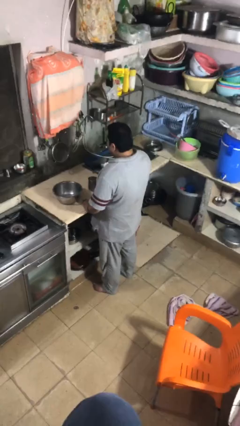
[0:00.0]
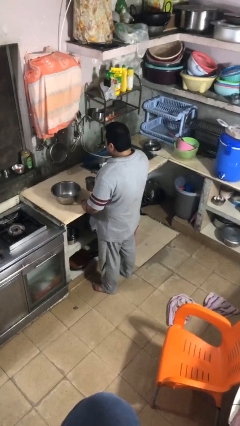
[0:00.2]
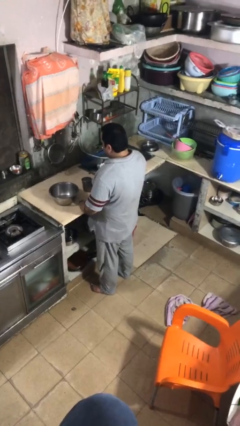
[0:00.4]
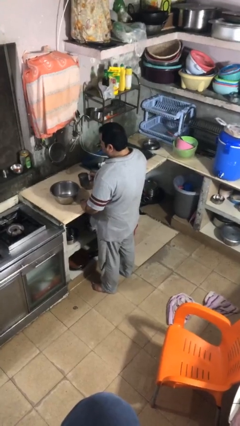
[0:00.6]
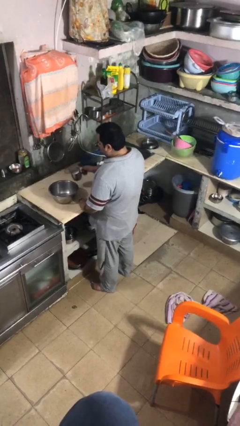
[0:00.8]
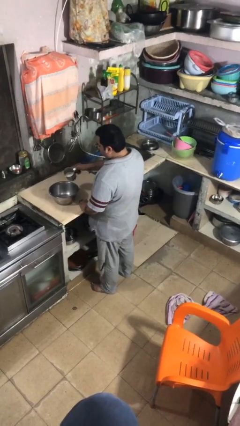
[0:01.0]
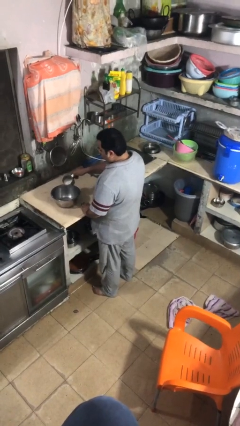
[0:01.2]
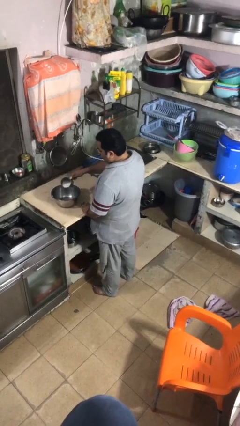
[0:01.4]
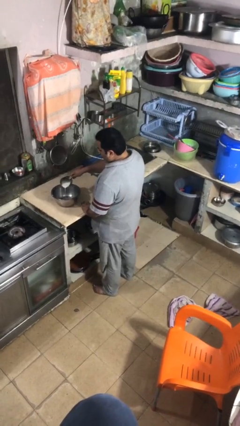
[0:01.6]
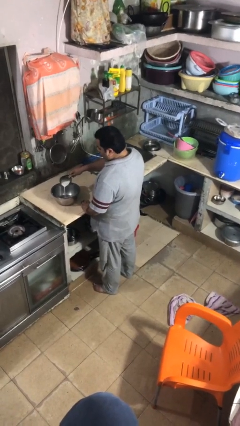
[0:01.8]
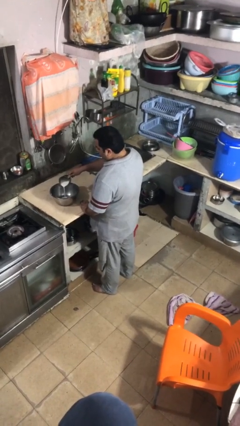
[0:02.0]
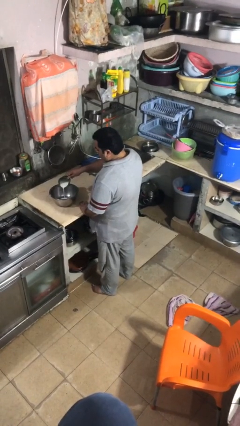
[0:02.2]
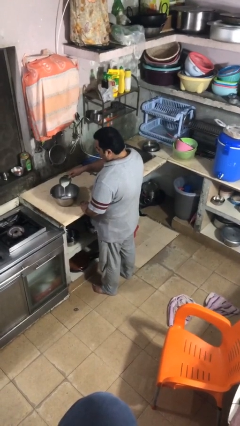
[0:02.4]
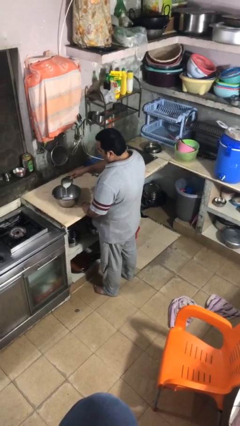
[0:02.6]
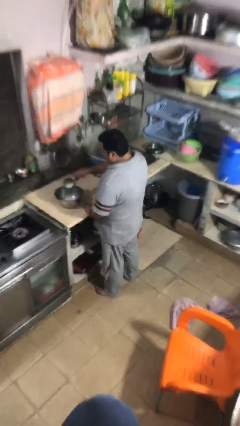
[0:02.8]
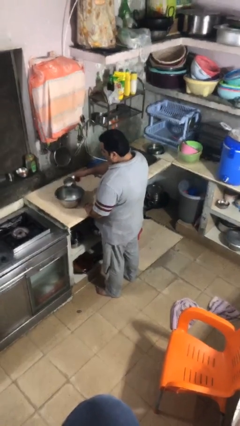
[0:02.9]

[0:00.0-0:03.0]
person pours into bowl

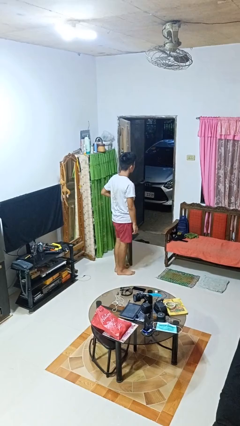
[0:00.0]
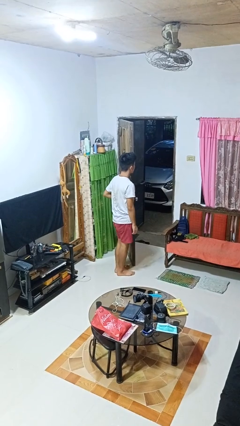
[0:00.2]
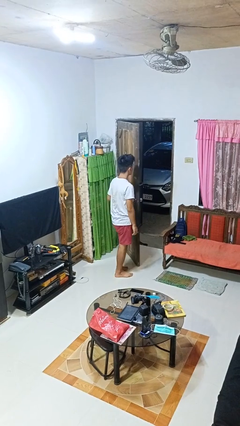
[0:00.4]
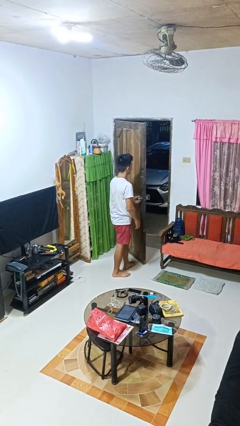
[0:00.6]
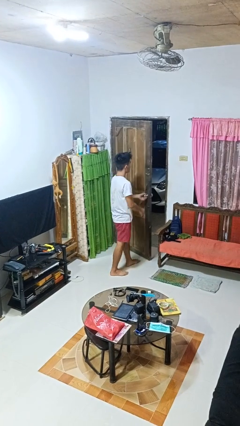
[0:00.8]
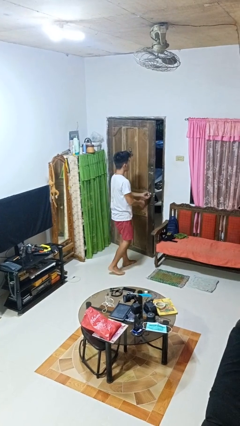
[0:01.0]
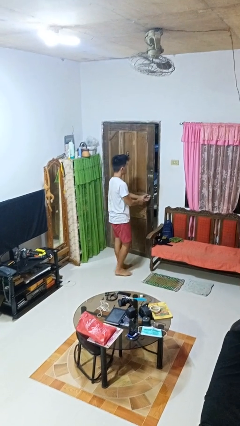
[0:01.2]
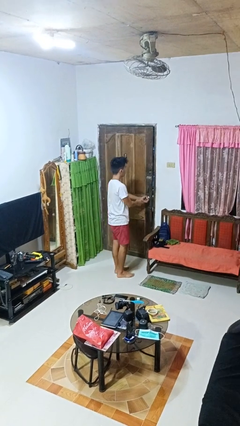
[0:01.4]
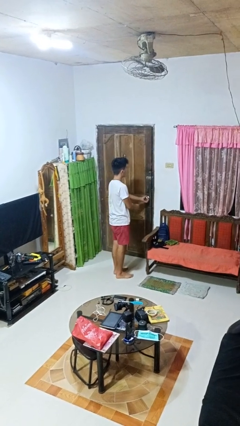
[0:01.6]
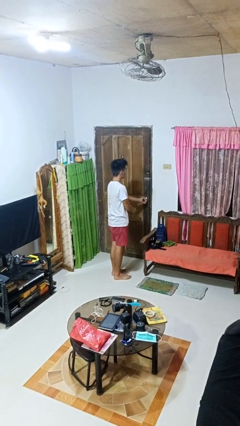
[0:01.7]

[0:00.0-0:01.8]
person closes facility door

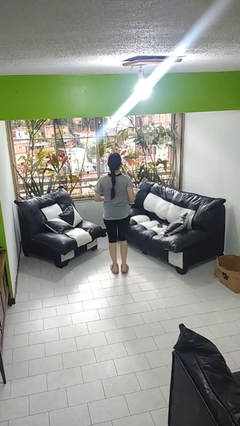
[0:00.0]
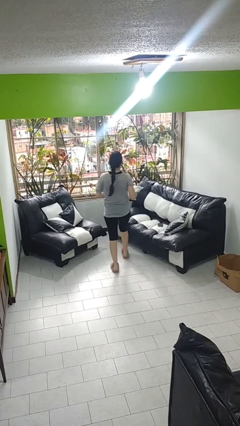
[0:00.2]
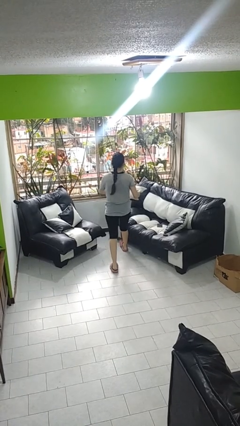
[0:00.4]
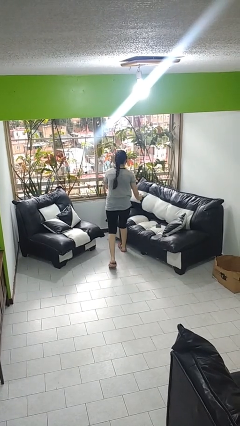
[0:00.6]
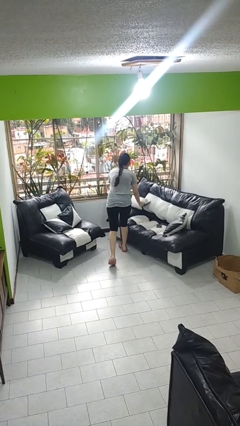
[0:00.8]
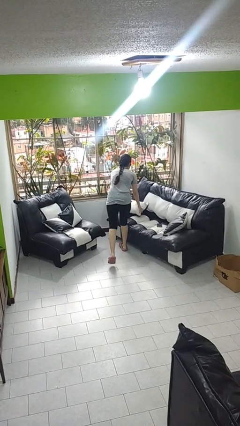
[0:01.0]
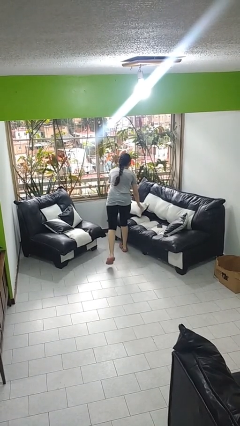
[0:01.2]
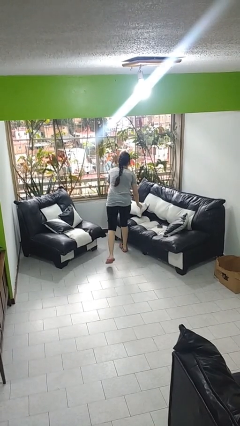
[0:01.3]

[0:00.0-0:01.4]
person puts down object on couch

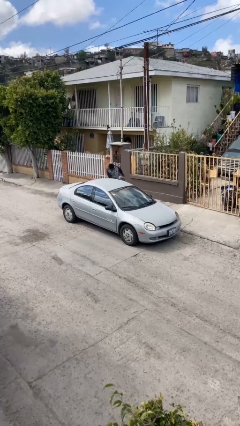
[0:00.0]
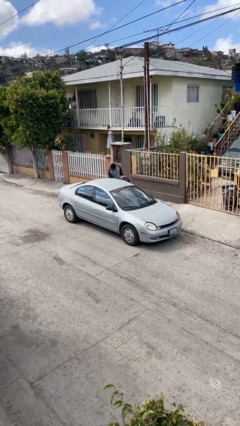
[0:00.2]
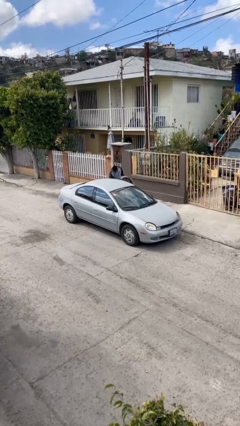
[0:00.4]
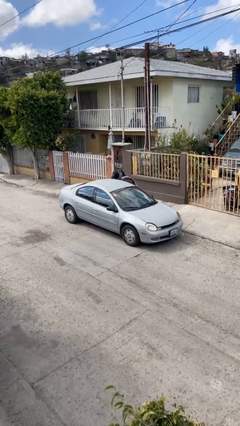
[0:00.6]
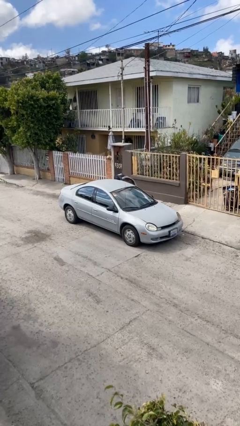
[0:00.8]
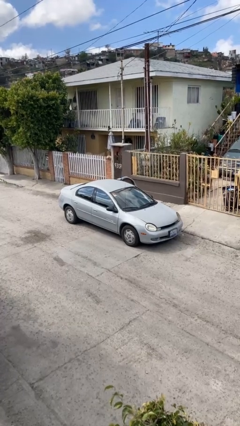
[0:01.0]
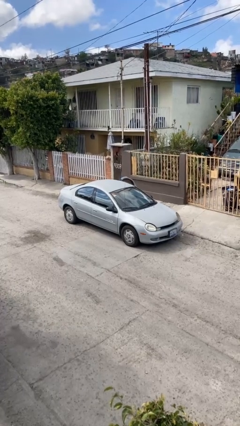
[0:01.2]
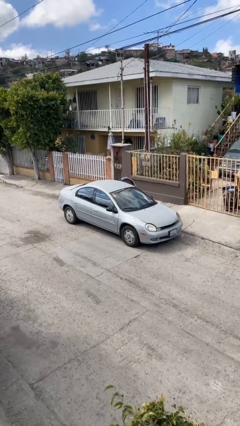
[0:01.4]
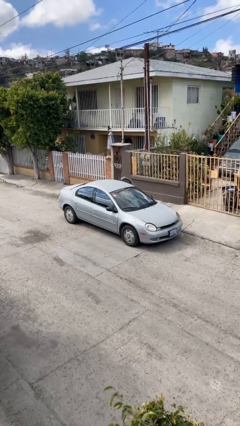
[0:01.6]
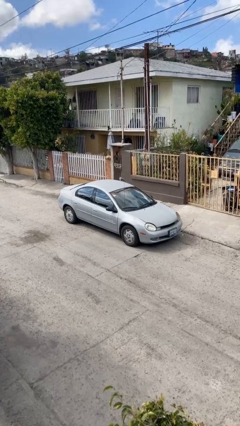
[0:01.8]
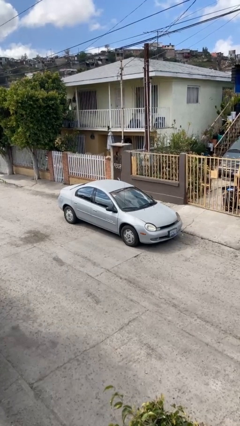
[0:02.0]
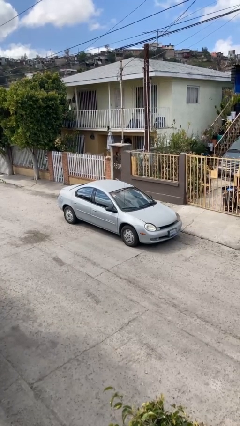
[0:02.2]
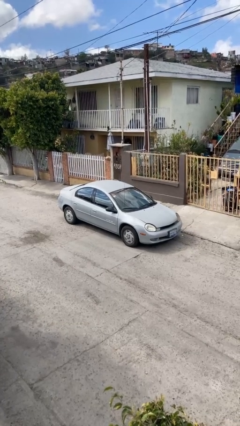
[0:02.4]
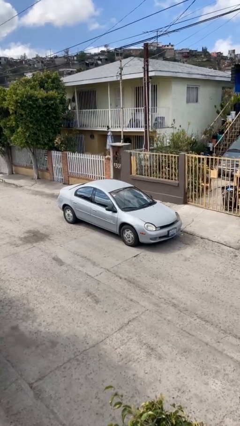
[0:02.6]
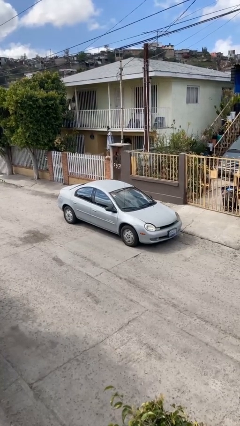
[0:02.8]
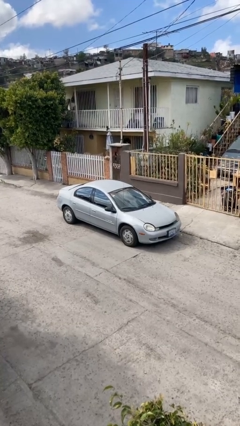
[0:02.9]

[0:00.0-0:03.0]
car picks up person

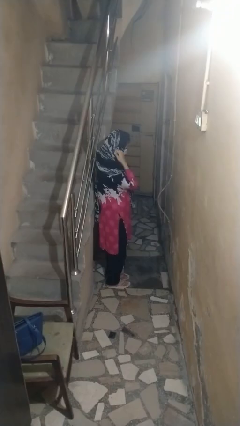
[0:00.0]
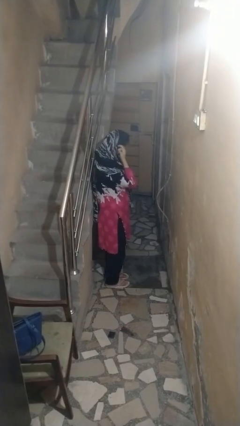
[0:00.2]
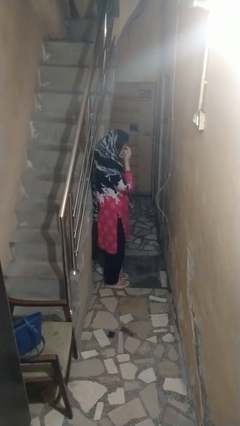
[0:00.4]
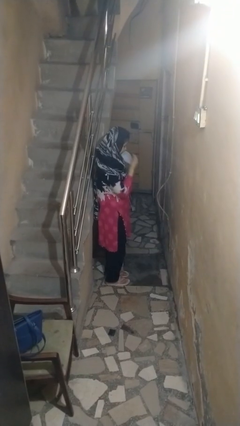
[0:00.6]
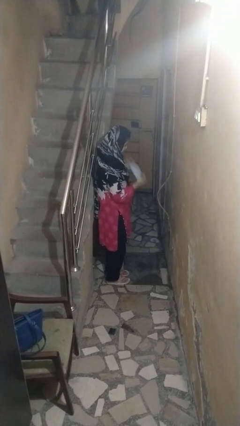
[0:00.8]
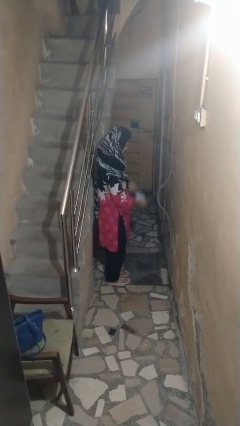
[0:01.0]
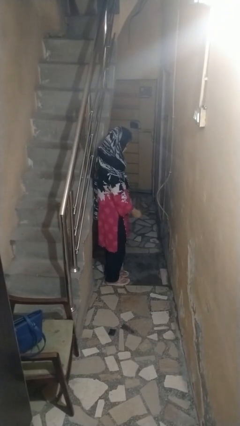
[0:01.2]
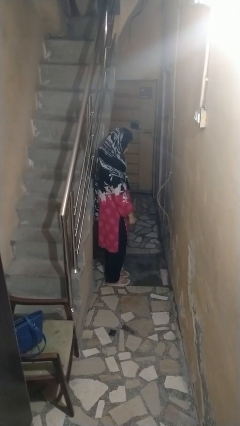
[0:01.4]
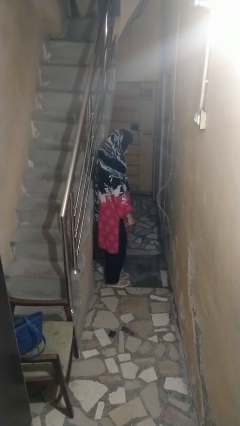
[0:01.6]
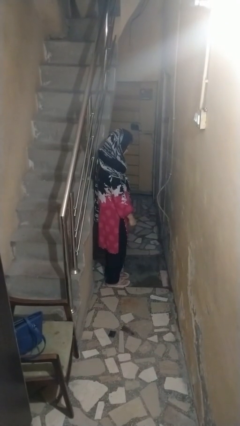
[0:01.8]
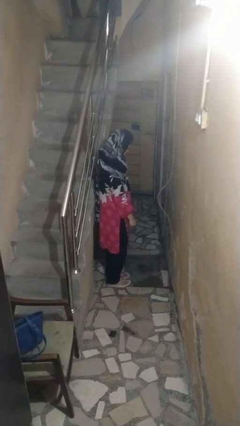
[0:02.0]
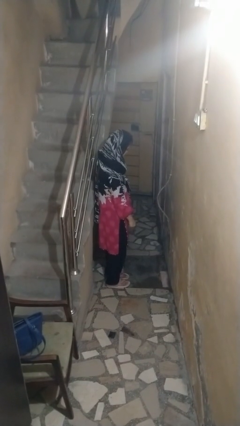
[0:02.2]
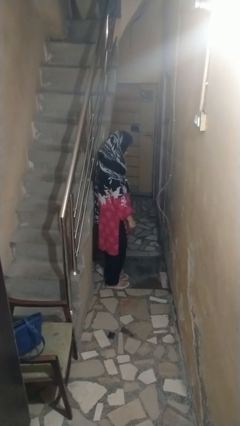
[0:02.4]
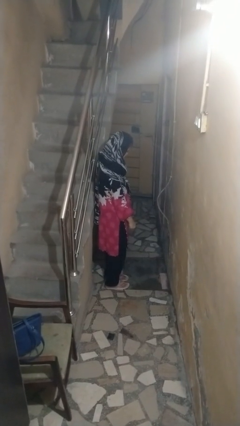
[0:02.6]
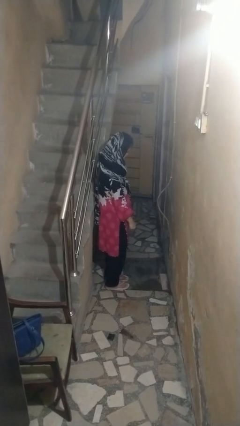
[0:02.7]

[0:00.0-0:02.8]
person takes off facemask

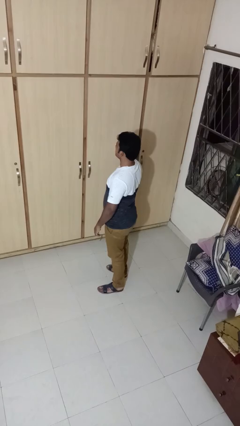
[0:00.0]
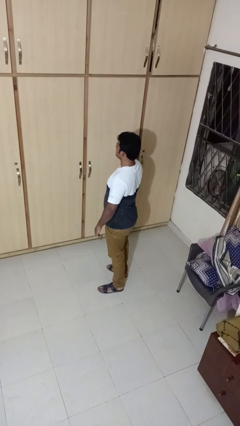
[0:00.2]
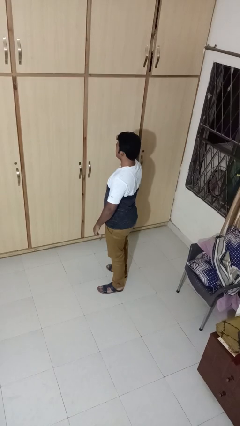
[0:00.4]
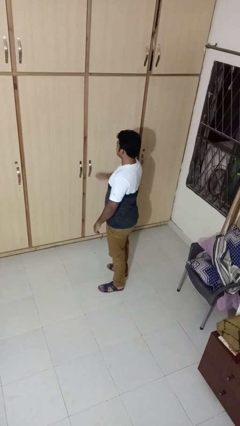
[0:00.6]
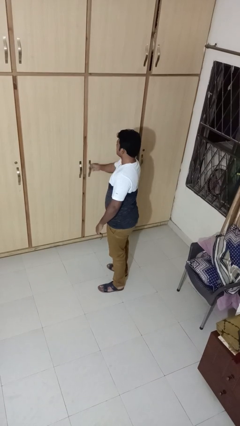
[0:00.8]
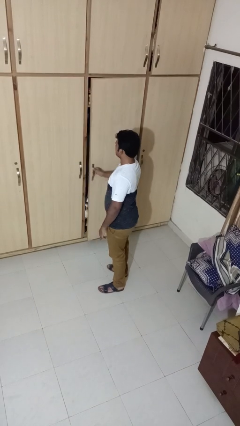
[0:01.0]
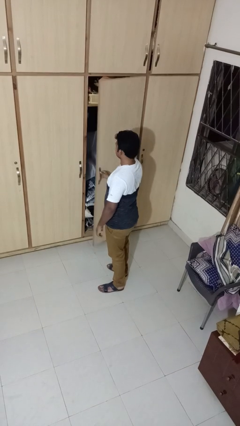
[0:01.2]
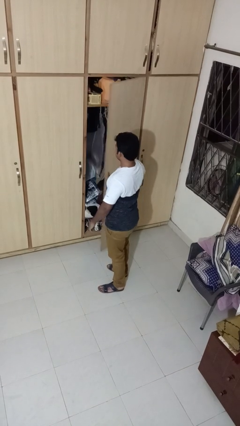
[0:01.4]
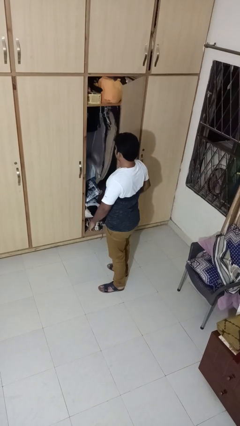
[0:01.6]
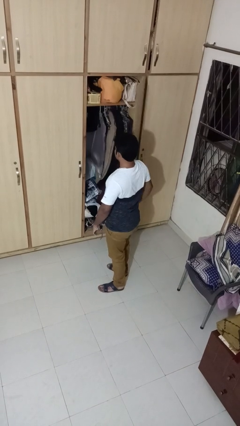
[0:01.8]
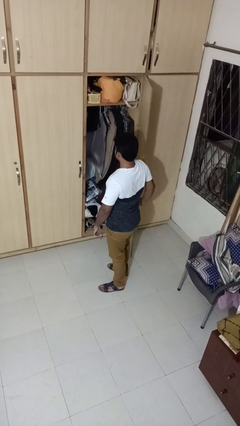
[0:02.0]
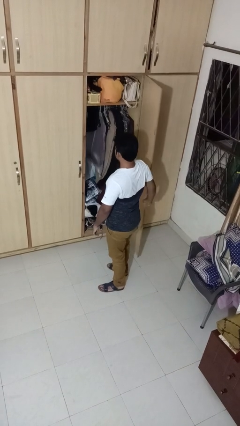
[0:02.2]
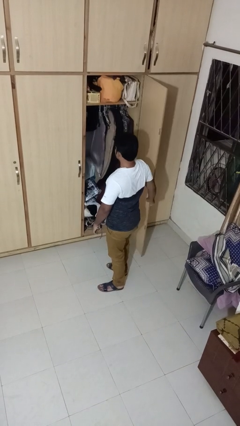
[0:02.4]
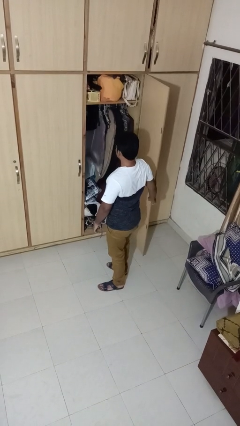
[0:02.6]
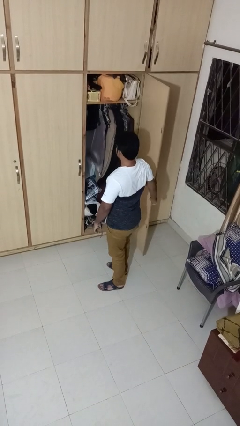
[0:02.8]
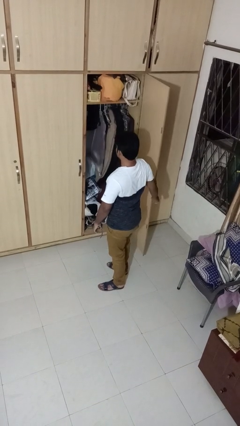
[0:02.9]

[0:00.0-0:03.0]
person opens closet door

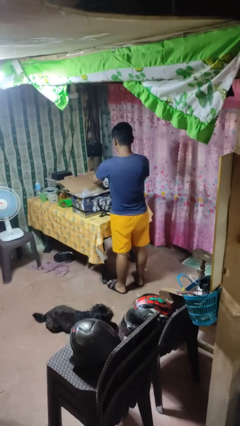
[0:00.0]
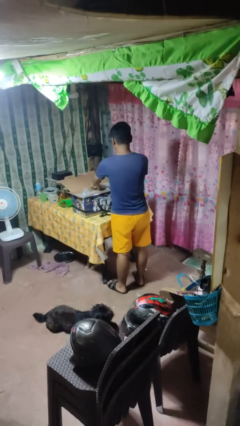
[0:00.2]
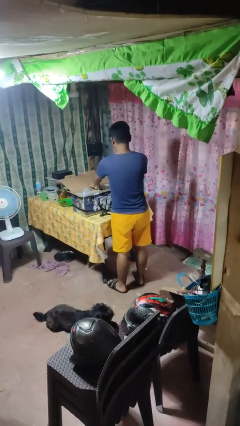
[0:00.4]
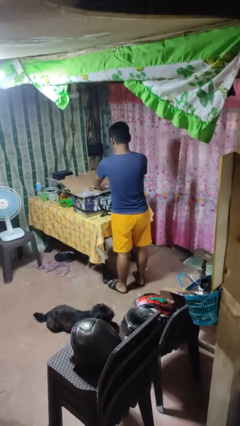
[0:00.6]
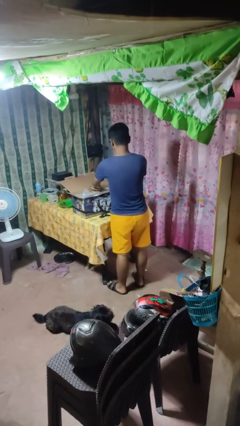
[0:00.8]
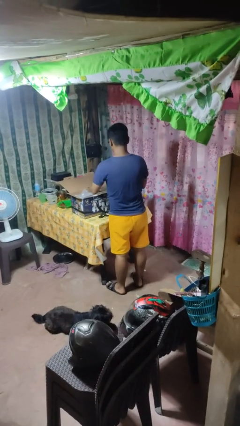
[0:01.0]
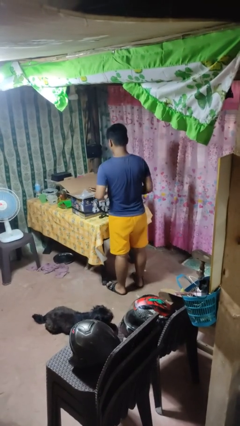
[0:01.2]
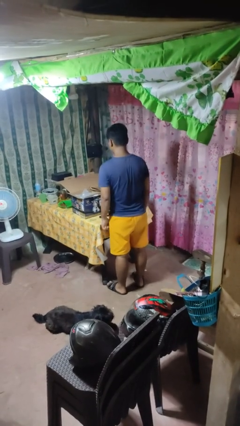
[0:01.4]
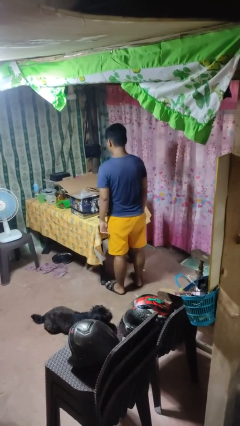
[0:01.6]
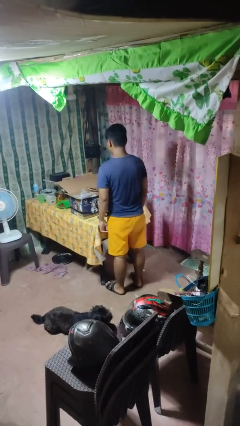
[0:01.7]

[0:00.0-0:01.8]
person puts object into box

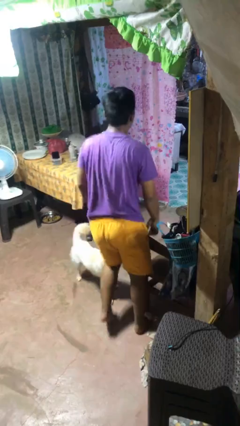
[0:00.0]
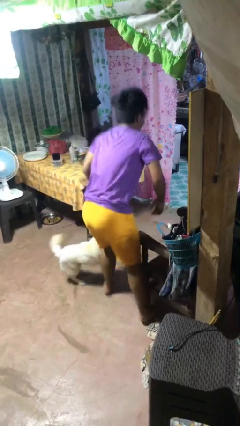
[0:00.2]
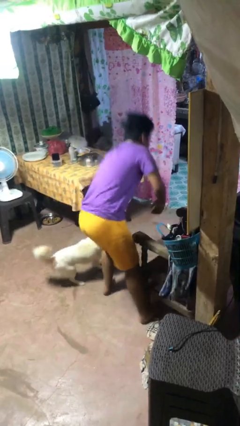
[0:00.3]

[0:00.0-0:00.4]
person trips on object on floor
